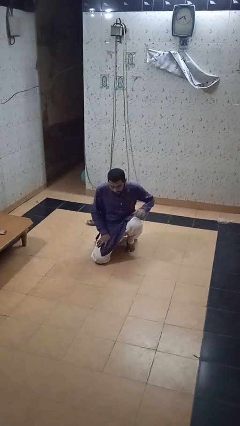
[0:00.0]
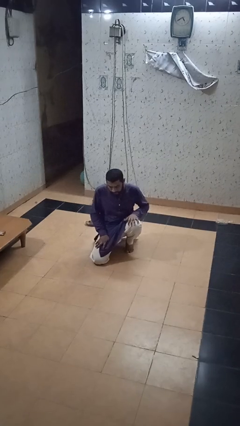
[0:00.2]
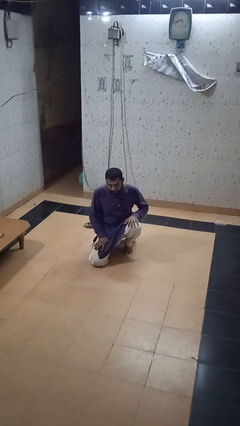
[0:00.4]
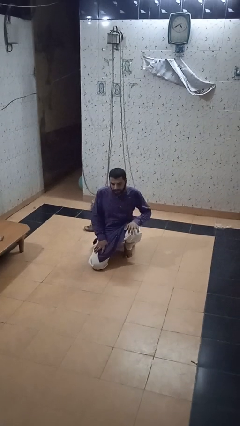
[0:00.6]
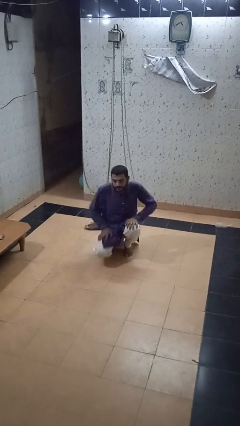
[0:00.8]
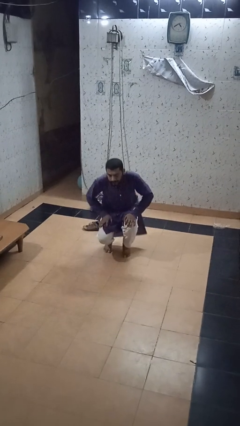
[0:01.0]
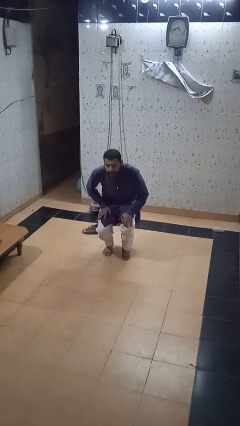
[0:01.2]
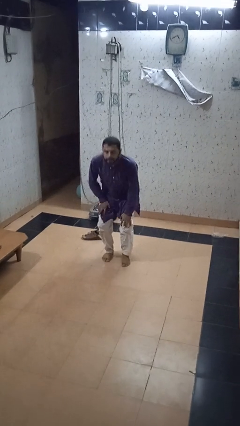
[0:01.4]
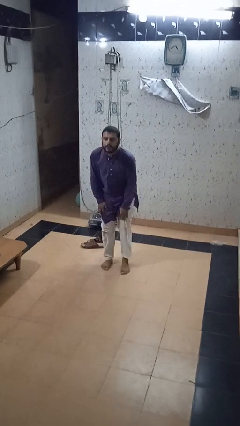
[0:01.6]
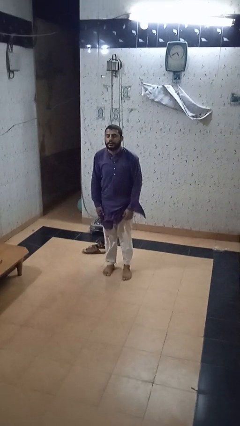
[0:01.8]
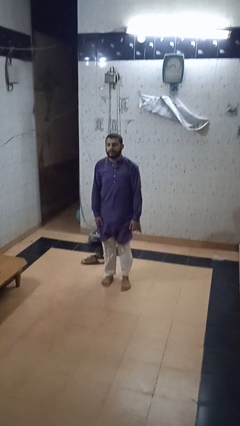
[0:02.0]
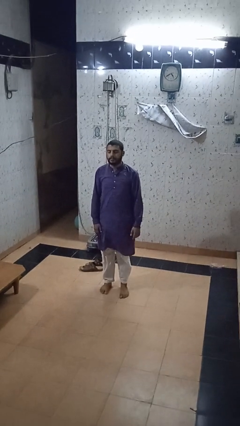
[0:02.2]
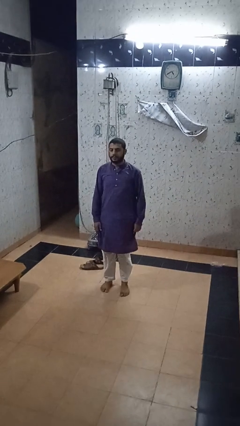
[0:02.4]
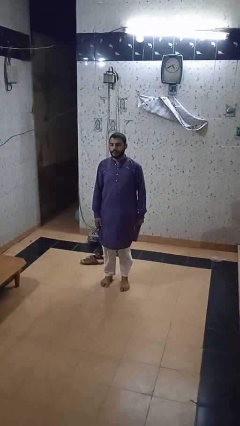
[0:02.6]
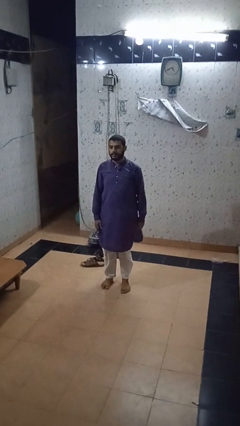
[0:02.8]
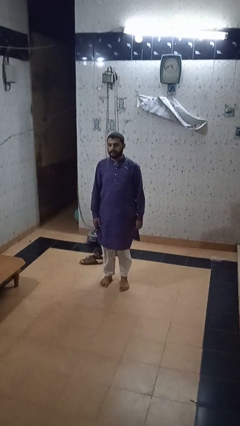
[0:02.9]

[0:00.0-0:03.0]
person stands up from floor

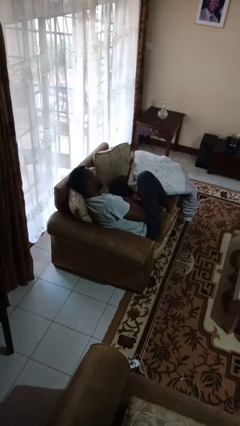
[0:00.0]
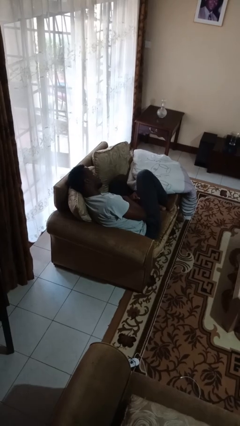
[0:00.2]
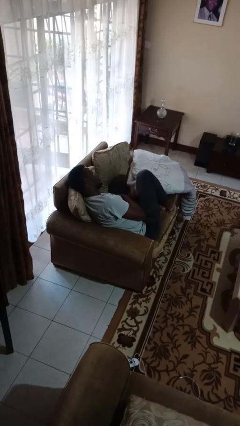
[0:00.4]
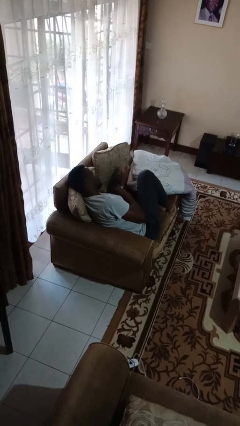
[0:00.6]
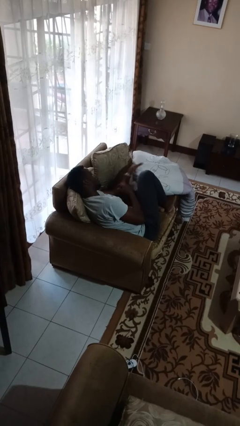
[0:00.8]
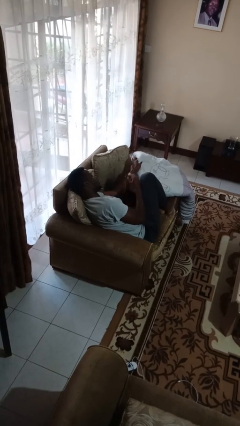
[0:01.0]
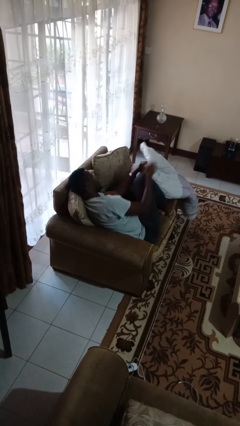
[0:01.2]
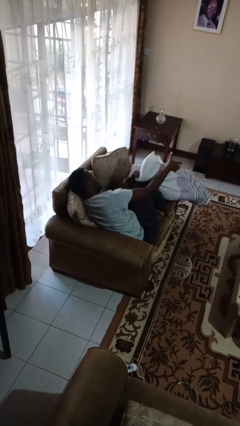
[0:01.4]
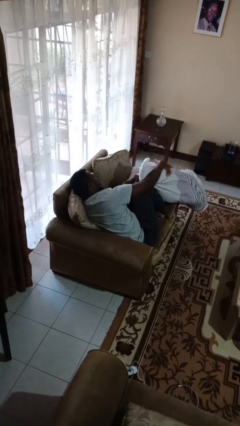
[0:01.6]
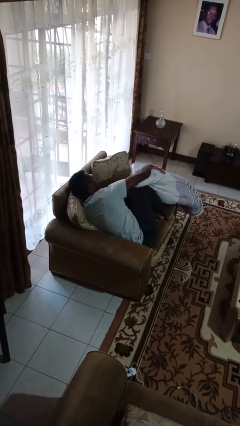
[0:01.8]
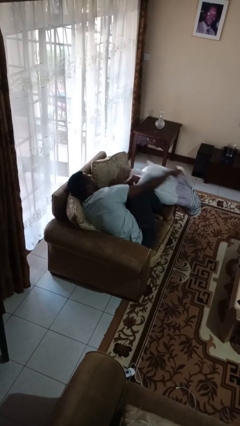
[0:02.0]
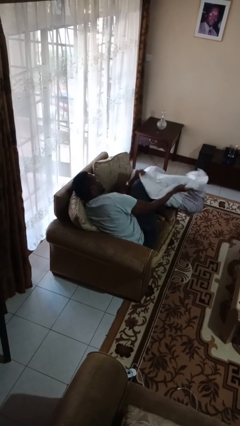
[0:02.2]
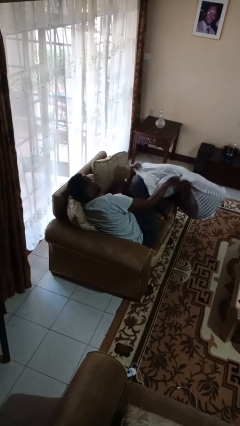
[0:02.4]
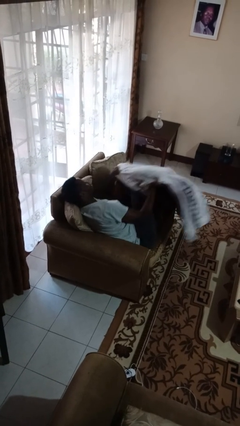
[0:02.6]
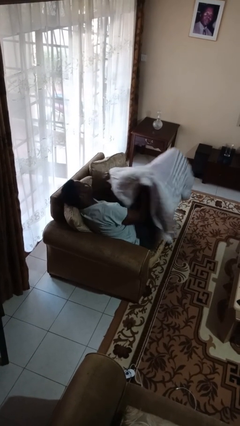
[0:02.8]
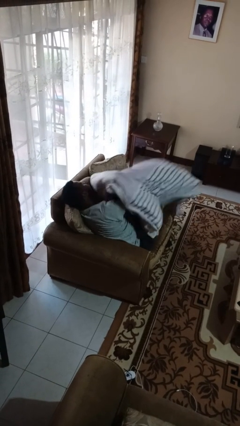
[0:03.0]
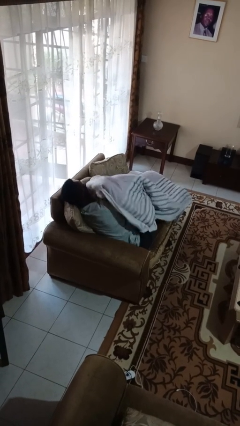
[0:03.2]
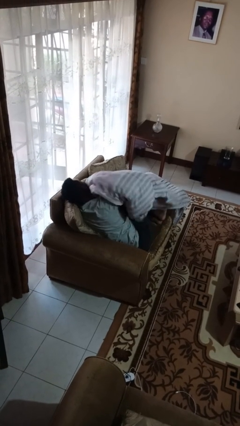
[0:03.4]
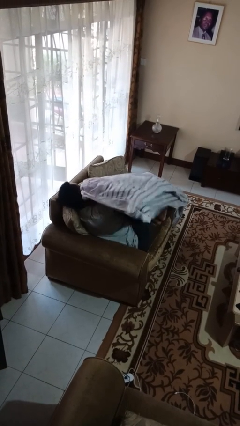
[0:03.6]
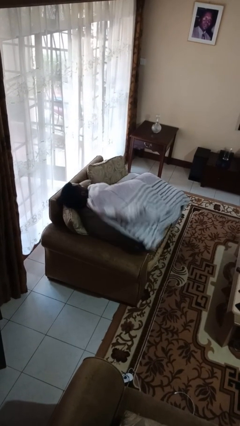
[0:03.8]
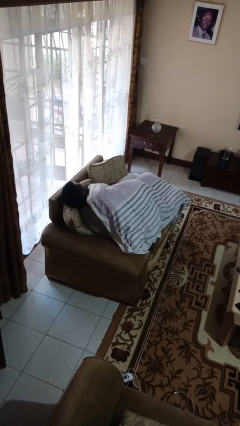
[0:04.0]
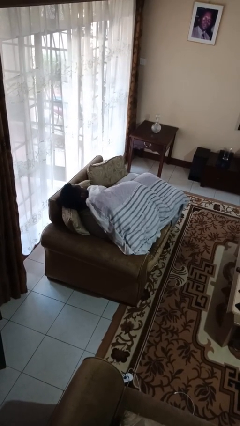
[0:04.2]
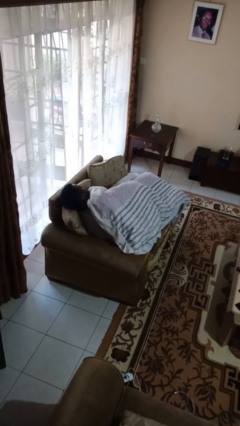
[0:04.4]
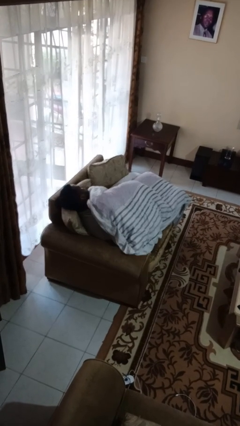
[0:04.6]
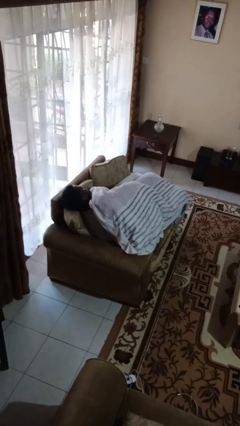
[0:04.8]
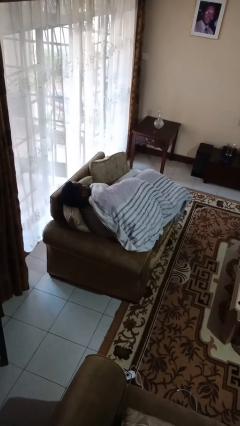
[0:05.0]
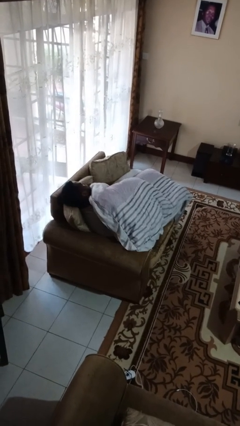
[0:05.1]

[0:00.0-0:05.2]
person covers with blanket

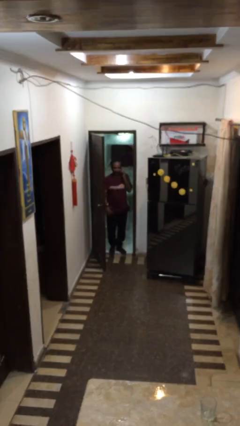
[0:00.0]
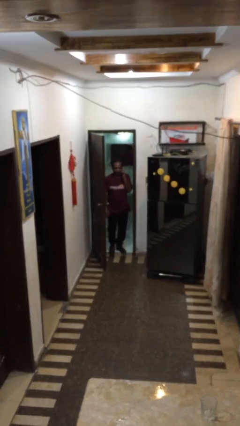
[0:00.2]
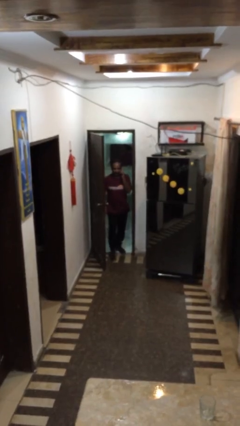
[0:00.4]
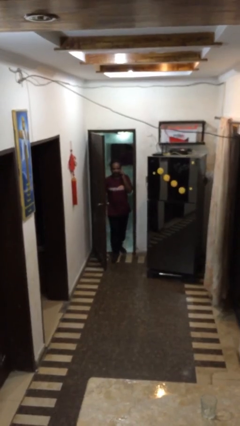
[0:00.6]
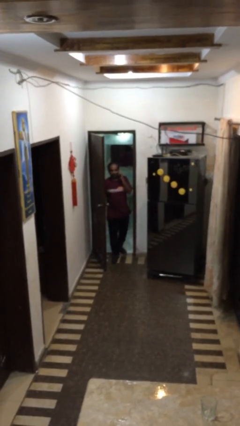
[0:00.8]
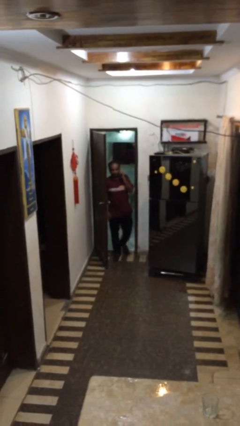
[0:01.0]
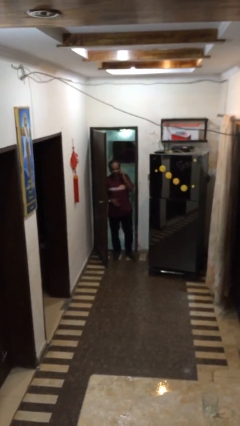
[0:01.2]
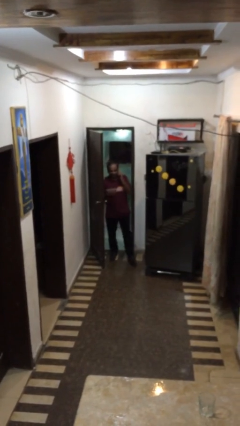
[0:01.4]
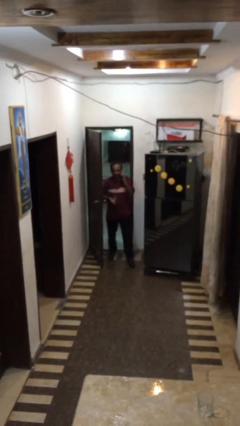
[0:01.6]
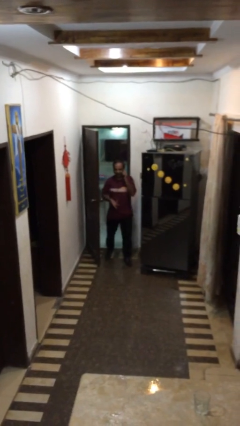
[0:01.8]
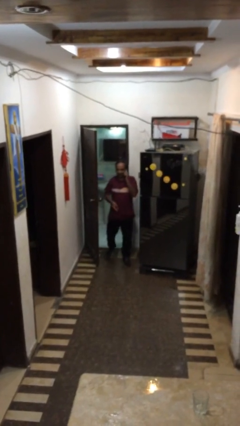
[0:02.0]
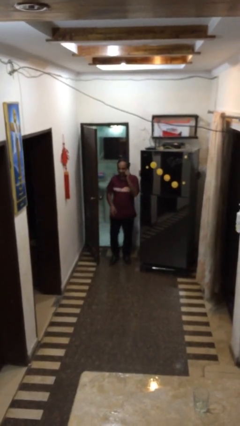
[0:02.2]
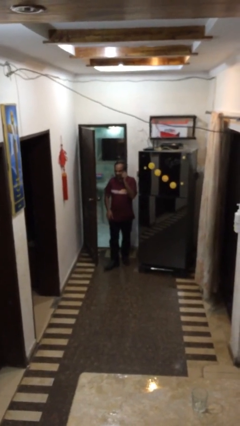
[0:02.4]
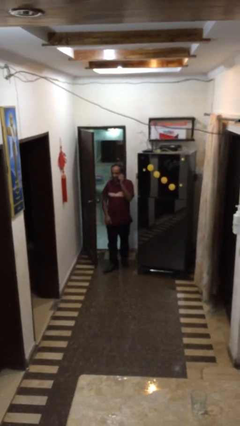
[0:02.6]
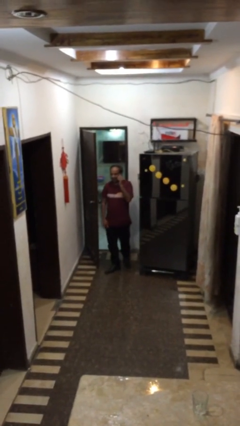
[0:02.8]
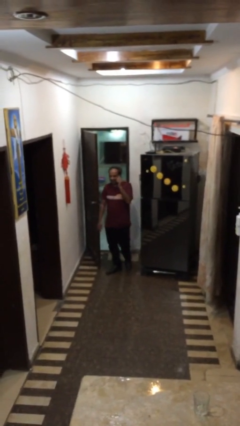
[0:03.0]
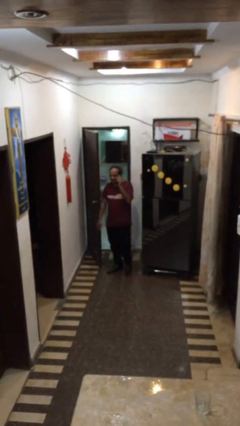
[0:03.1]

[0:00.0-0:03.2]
person enters scene through structure

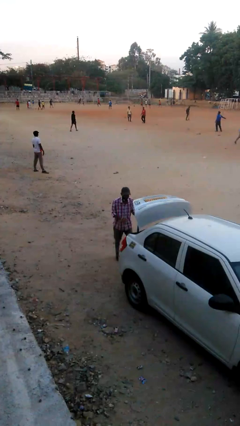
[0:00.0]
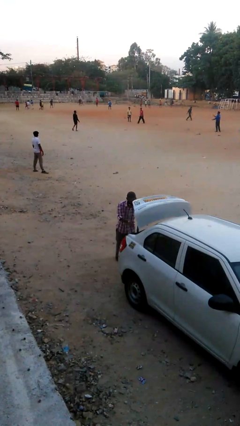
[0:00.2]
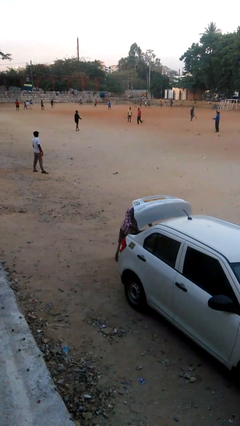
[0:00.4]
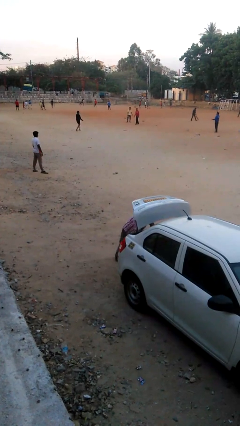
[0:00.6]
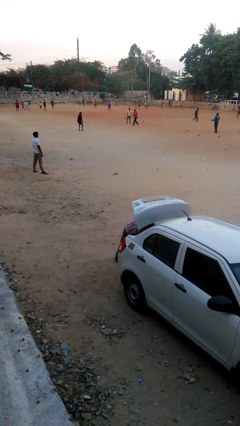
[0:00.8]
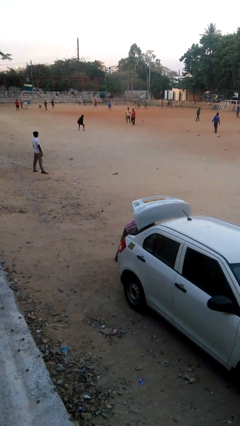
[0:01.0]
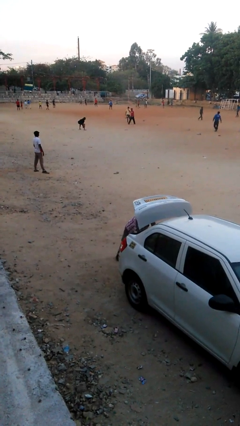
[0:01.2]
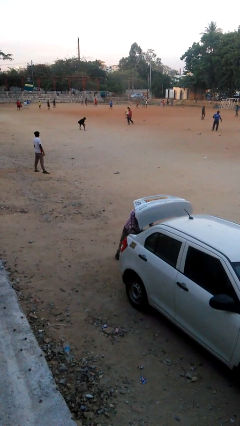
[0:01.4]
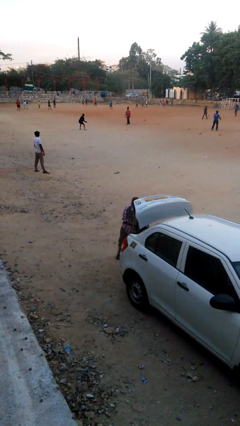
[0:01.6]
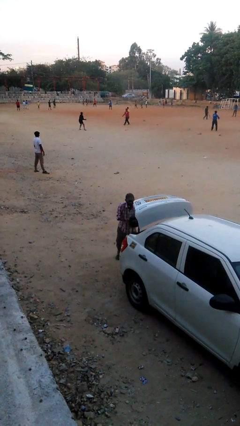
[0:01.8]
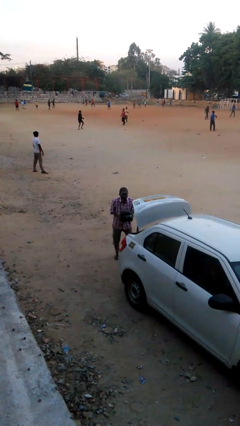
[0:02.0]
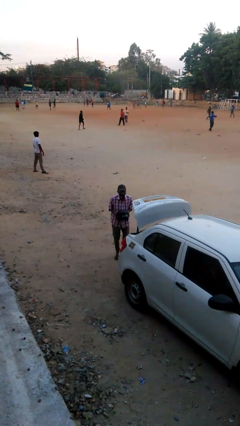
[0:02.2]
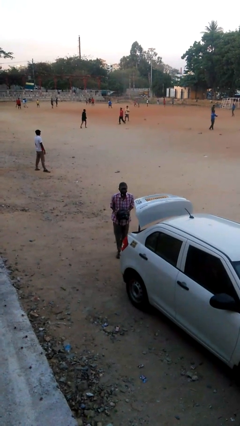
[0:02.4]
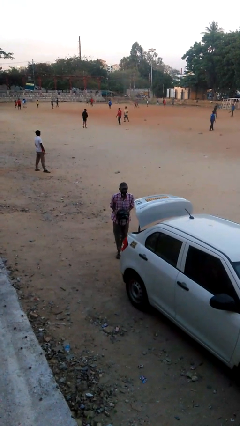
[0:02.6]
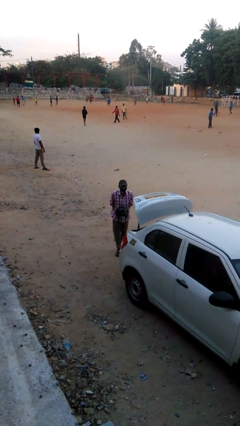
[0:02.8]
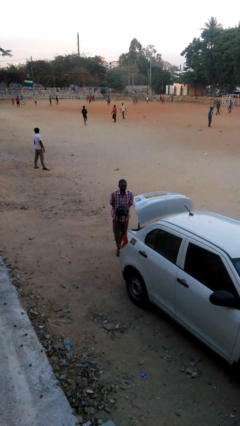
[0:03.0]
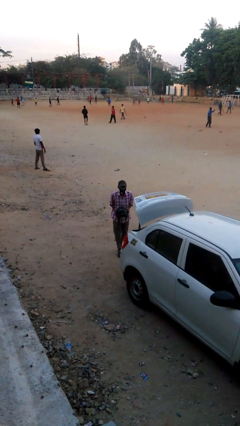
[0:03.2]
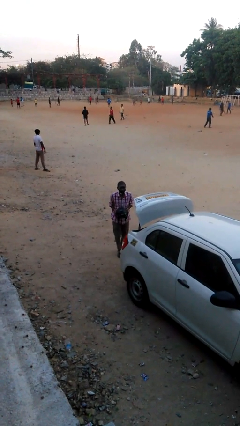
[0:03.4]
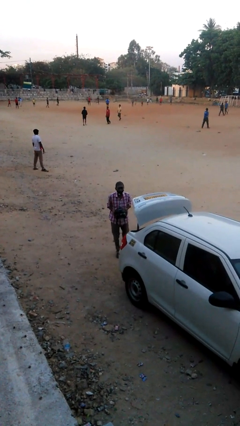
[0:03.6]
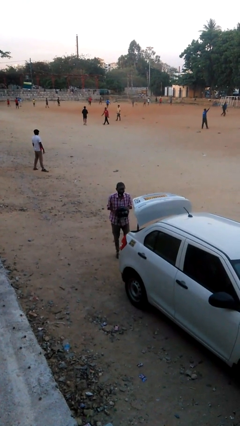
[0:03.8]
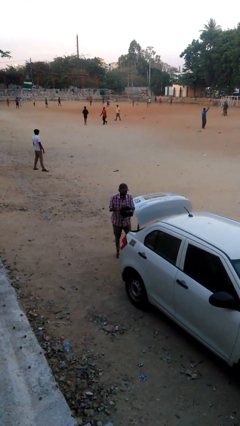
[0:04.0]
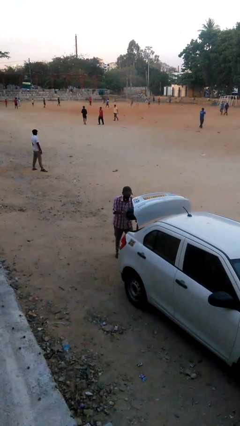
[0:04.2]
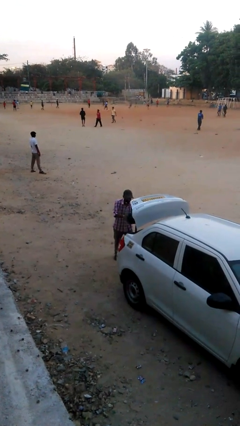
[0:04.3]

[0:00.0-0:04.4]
person unloads car

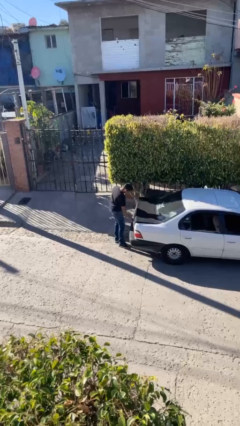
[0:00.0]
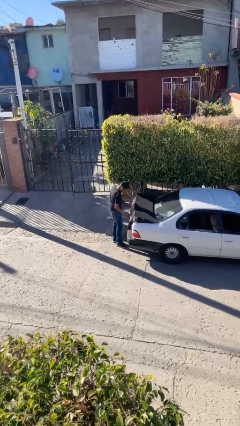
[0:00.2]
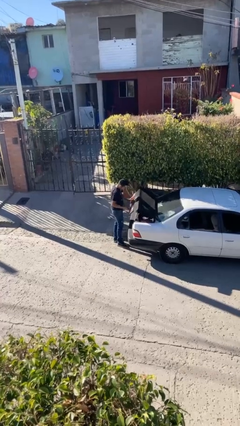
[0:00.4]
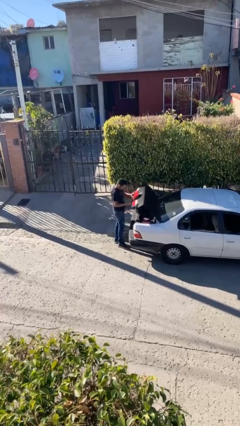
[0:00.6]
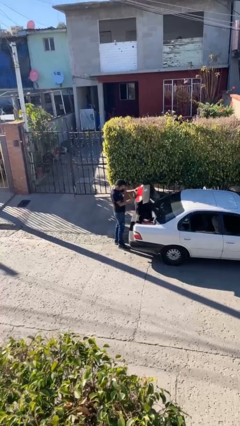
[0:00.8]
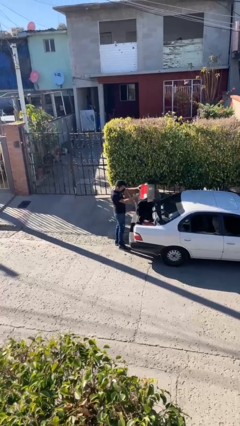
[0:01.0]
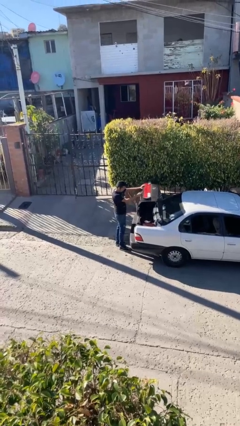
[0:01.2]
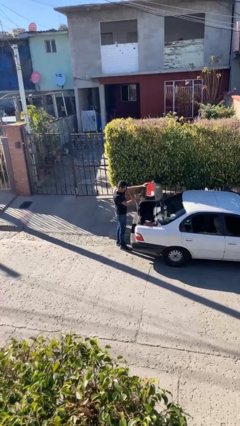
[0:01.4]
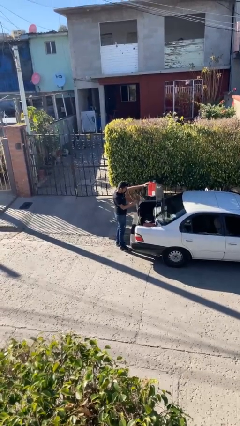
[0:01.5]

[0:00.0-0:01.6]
person opens car trunk

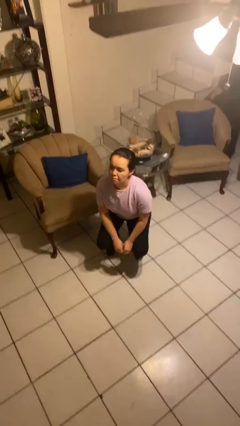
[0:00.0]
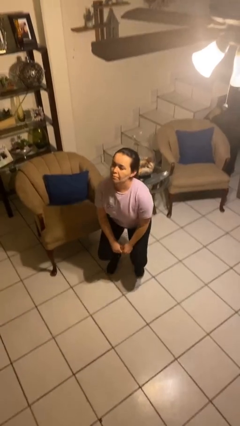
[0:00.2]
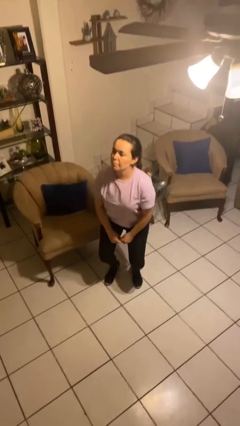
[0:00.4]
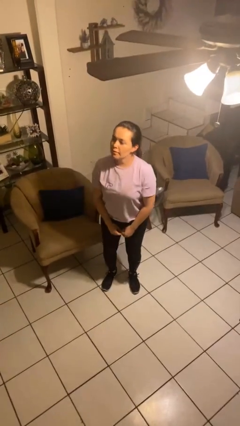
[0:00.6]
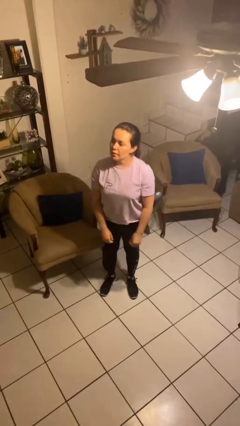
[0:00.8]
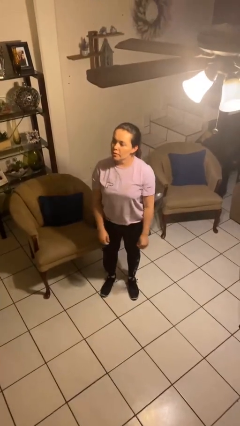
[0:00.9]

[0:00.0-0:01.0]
person stands up
